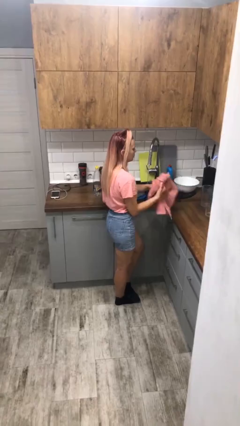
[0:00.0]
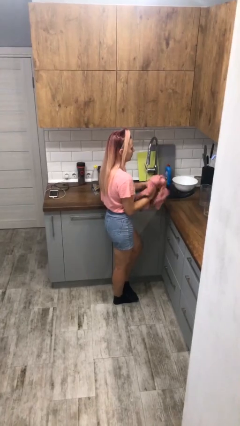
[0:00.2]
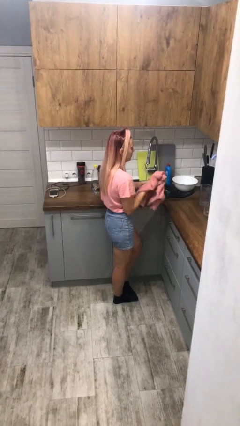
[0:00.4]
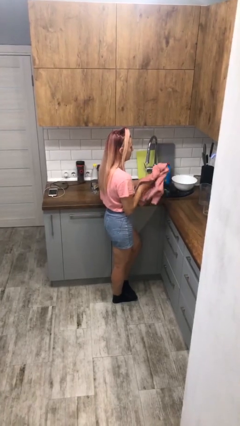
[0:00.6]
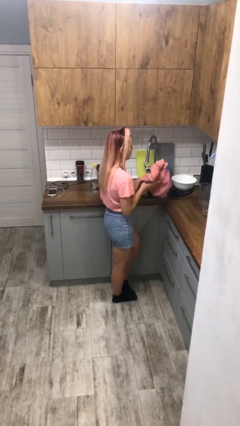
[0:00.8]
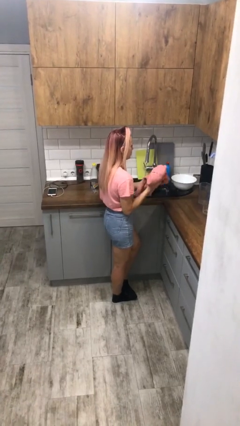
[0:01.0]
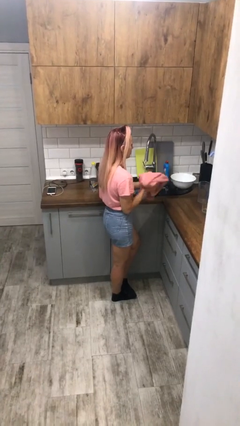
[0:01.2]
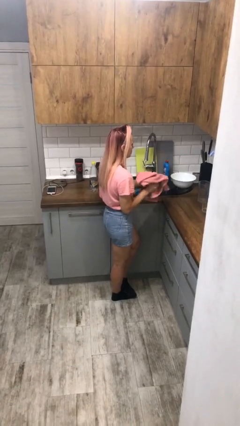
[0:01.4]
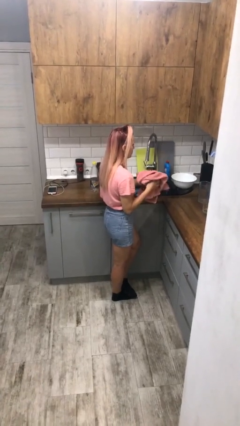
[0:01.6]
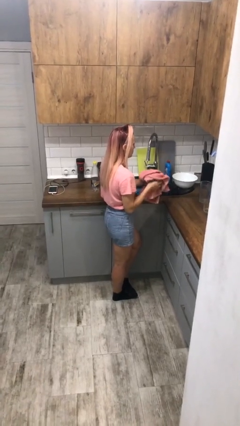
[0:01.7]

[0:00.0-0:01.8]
person dries hands with towel

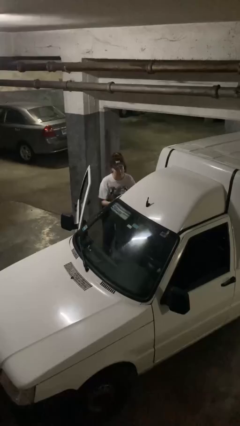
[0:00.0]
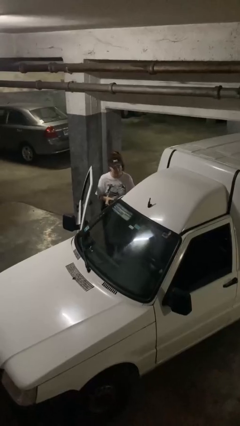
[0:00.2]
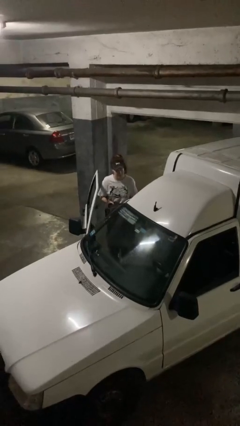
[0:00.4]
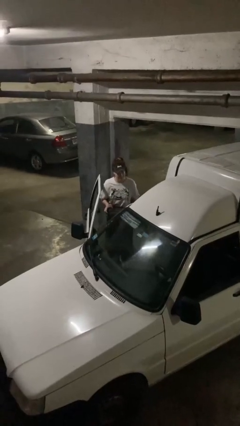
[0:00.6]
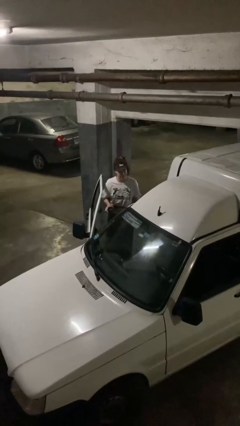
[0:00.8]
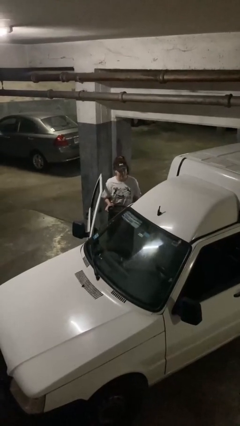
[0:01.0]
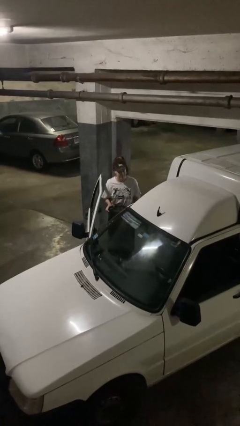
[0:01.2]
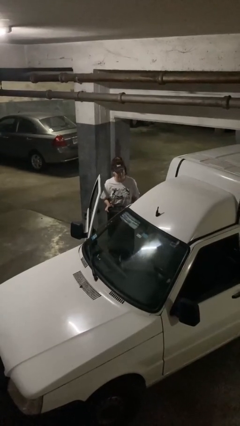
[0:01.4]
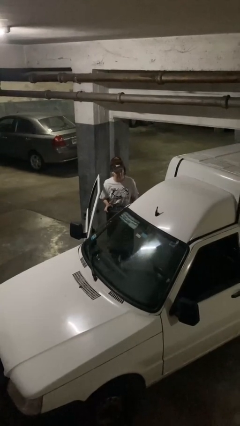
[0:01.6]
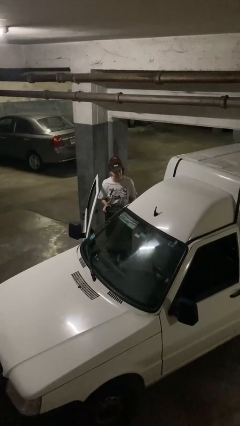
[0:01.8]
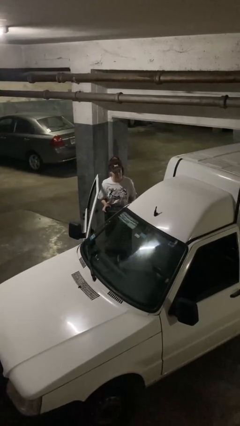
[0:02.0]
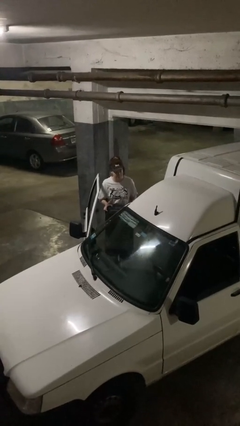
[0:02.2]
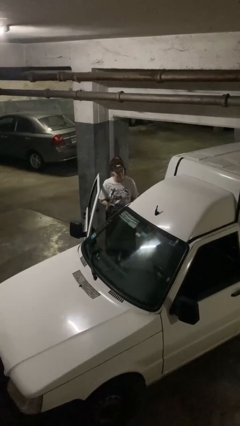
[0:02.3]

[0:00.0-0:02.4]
person unloads car

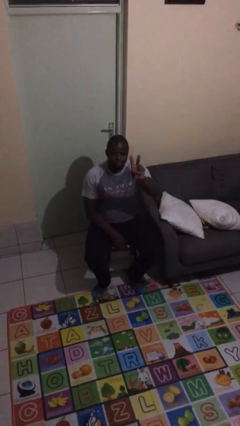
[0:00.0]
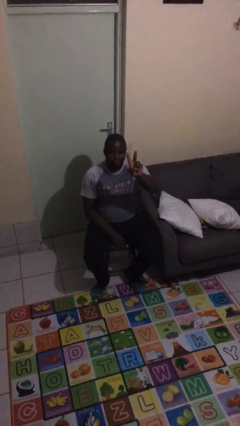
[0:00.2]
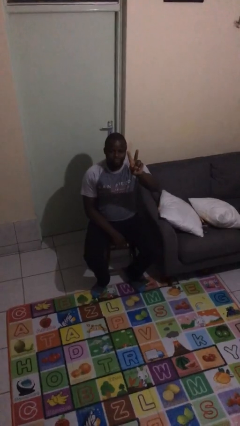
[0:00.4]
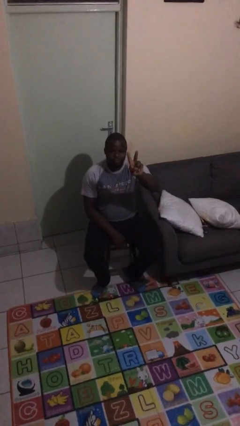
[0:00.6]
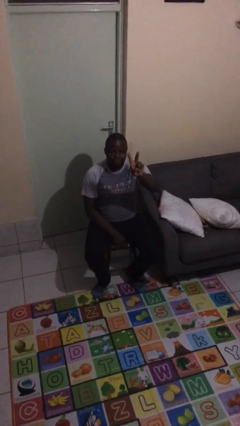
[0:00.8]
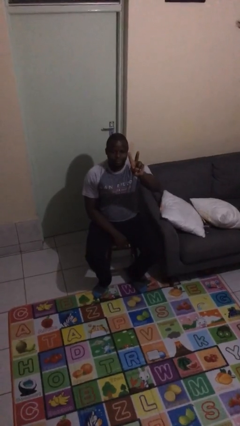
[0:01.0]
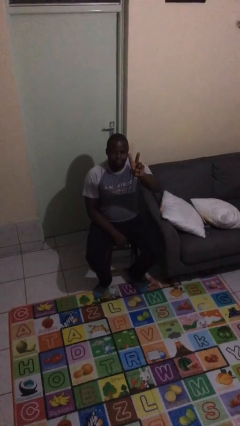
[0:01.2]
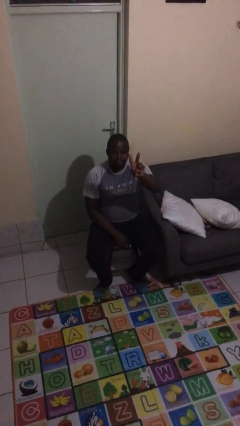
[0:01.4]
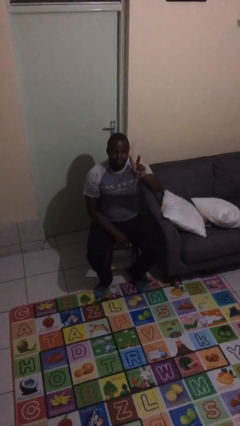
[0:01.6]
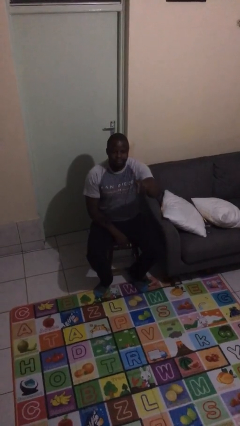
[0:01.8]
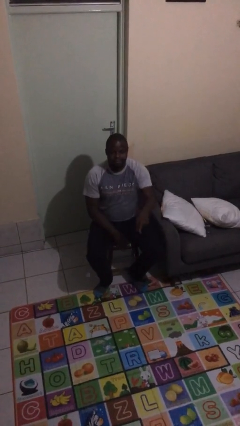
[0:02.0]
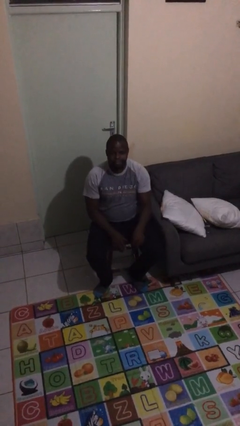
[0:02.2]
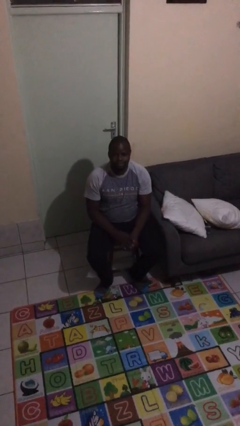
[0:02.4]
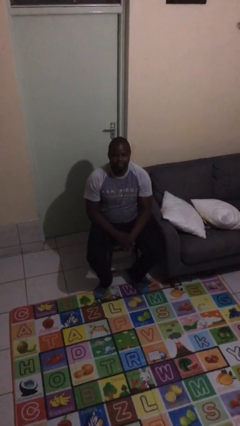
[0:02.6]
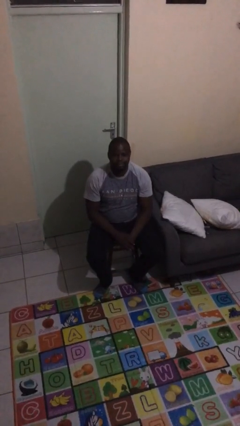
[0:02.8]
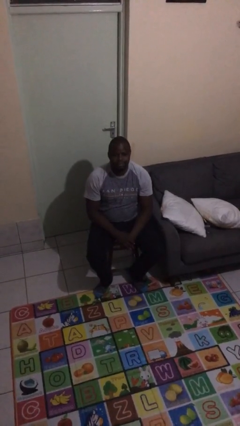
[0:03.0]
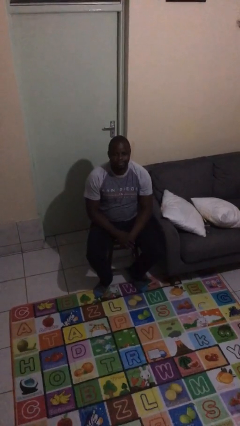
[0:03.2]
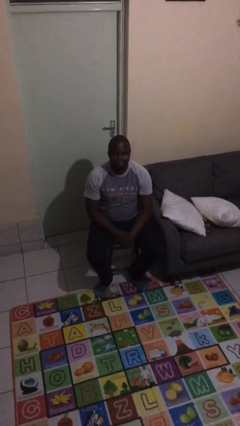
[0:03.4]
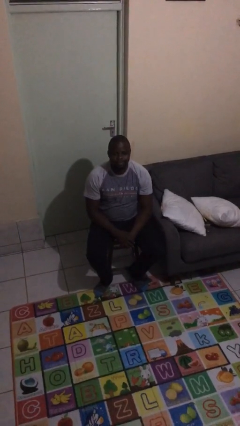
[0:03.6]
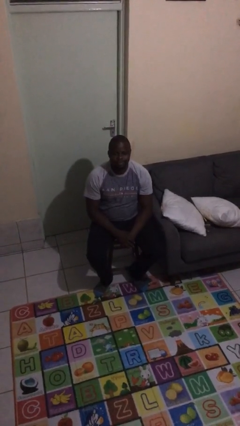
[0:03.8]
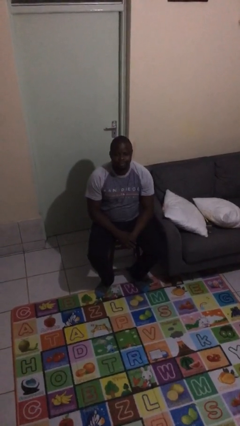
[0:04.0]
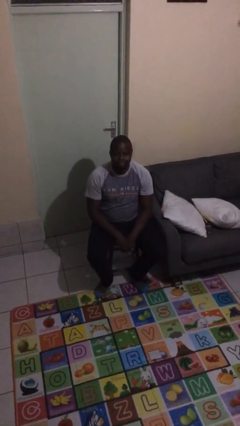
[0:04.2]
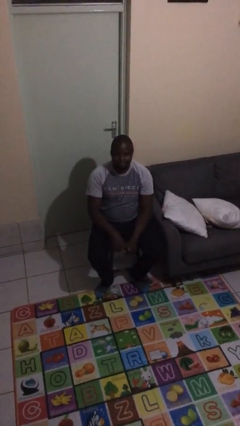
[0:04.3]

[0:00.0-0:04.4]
person gestures peace

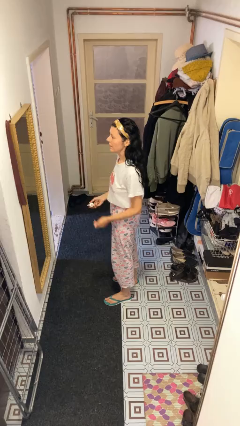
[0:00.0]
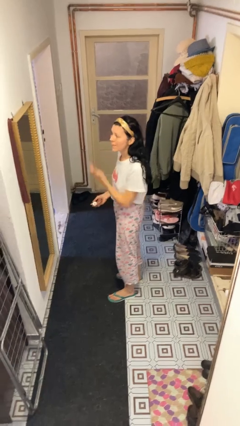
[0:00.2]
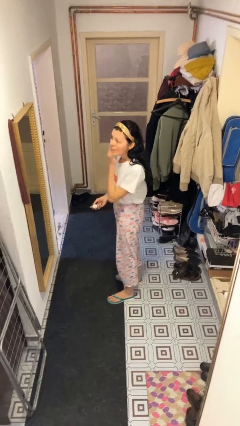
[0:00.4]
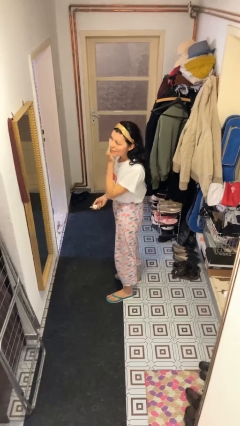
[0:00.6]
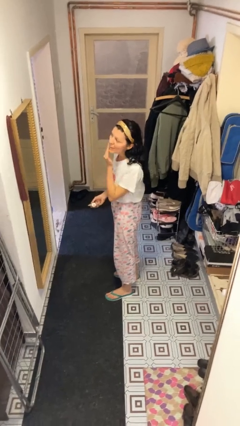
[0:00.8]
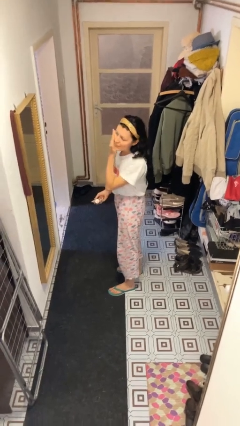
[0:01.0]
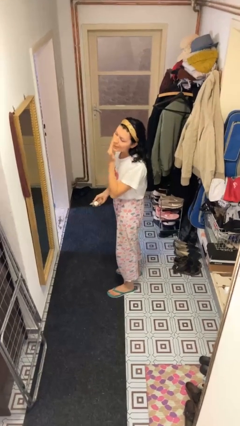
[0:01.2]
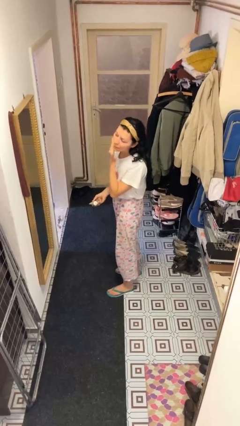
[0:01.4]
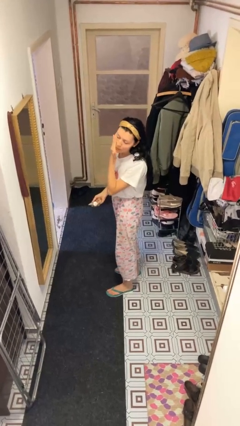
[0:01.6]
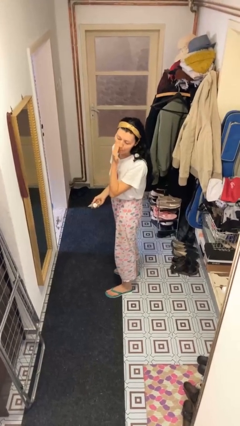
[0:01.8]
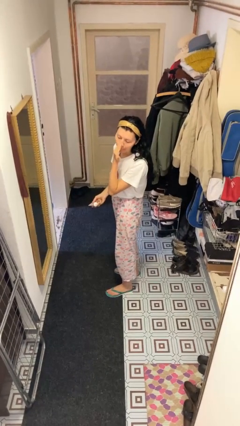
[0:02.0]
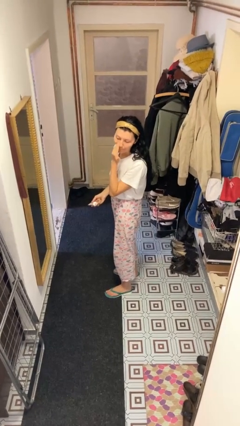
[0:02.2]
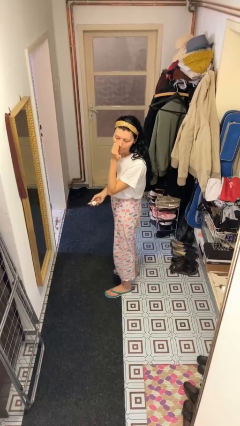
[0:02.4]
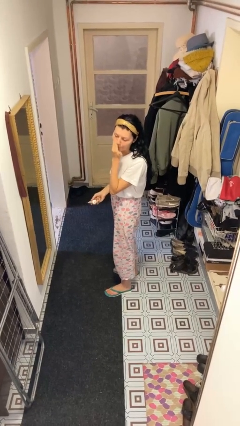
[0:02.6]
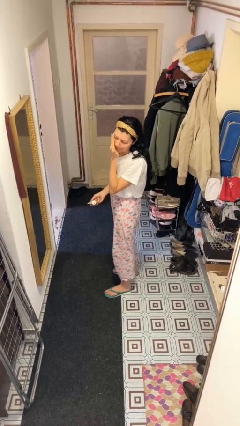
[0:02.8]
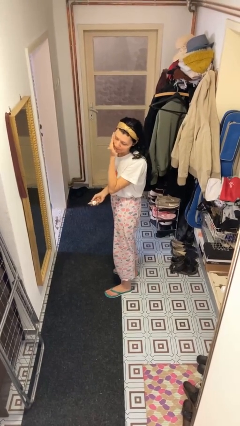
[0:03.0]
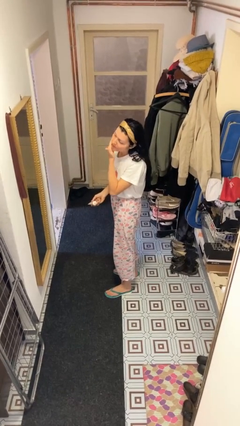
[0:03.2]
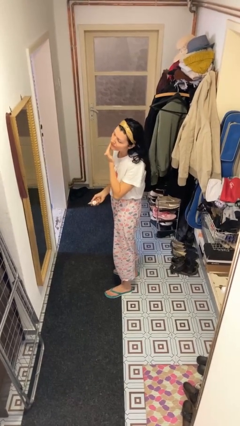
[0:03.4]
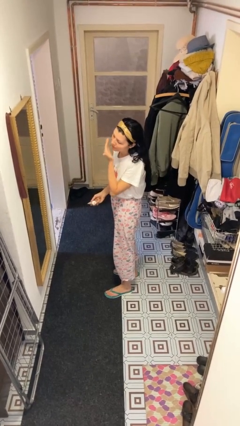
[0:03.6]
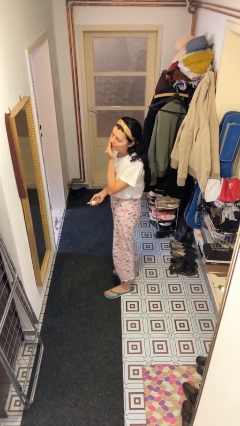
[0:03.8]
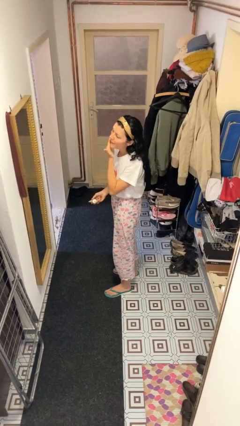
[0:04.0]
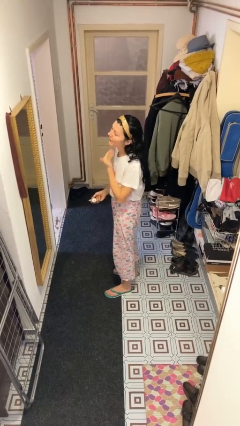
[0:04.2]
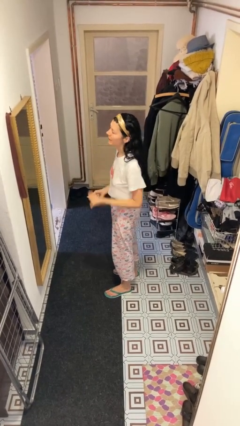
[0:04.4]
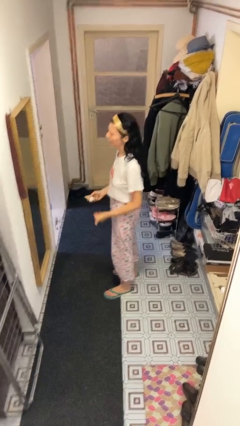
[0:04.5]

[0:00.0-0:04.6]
person applies foundation makeup

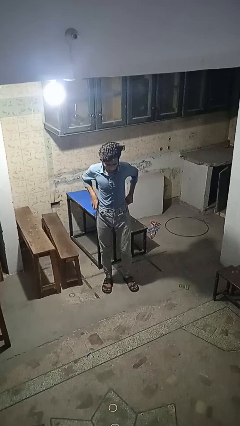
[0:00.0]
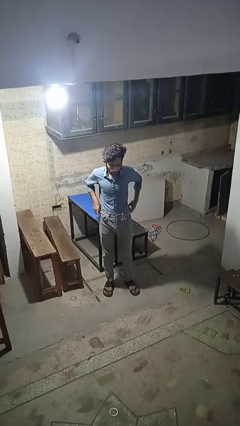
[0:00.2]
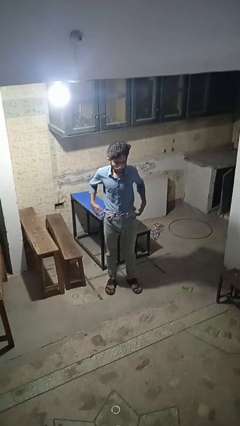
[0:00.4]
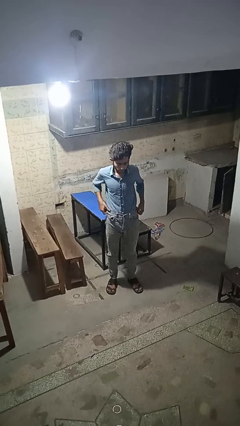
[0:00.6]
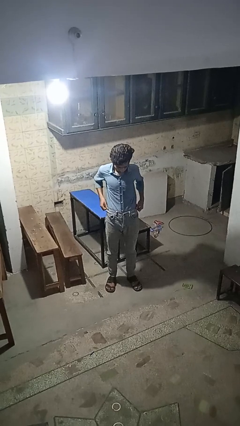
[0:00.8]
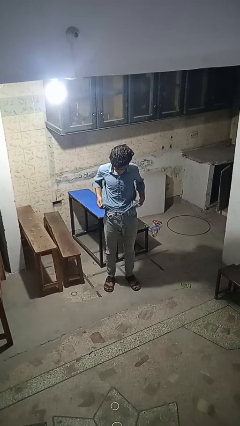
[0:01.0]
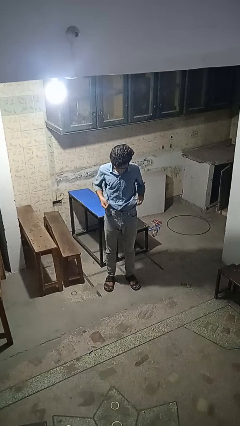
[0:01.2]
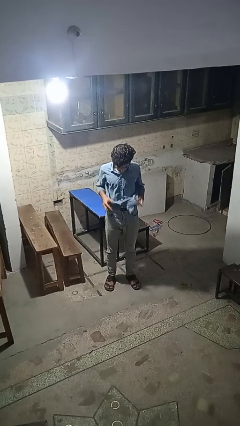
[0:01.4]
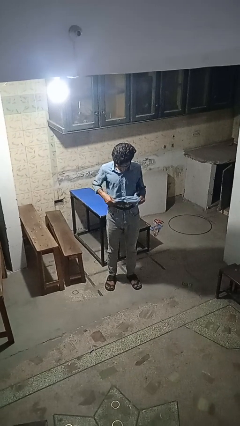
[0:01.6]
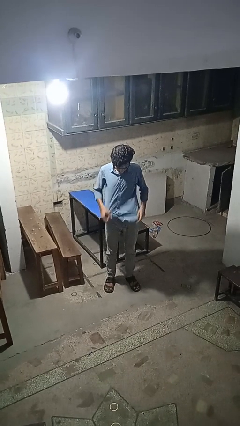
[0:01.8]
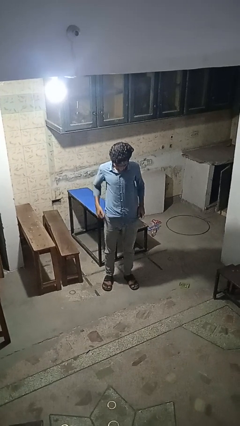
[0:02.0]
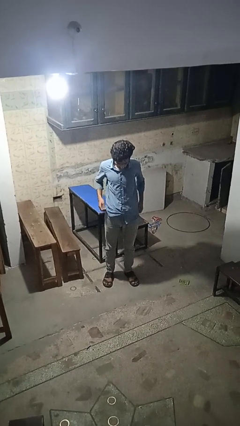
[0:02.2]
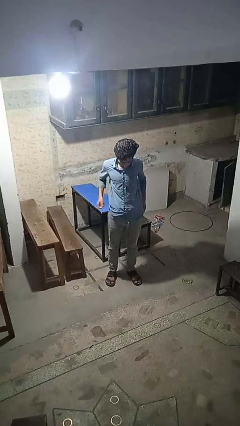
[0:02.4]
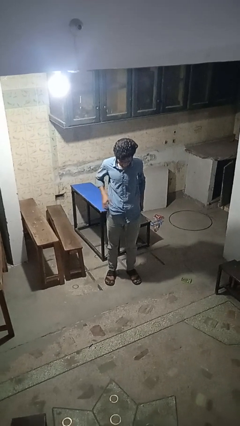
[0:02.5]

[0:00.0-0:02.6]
person untucks shirt

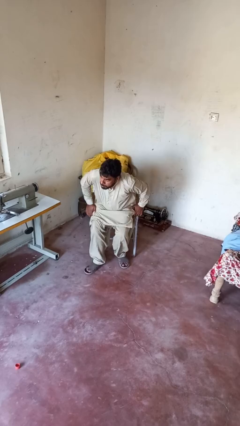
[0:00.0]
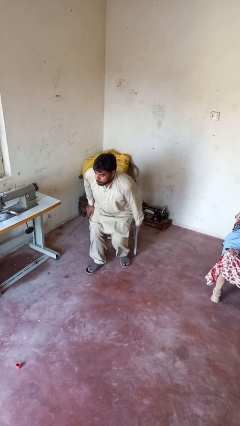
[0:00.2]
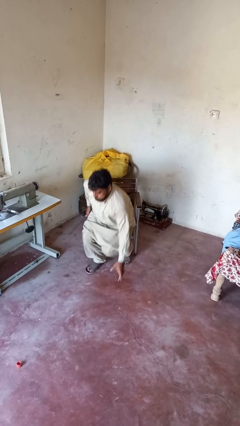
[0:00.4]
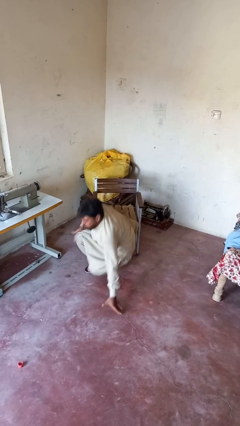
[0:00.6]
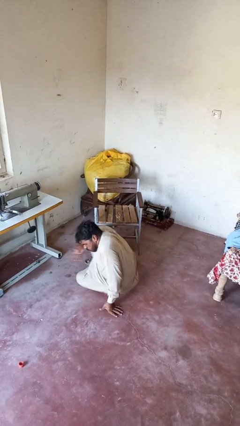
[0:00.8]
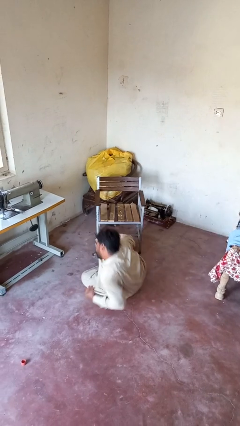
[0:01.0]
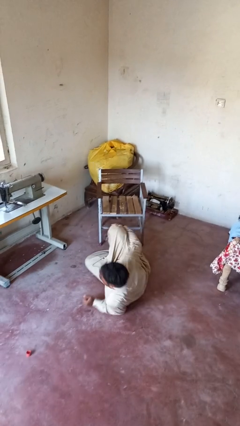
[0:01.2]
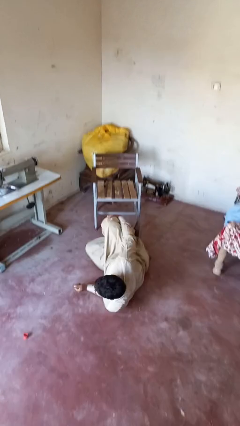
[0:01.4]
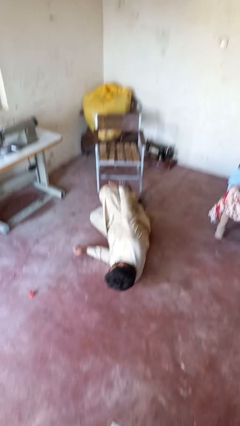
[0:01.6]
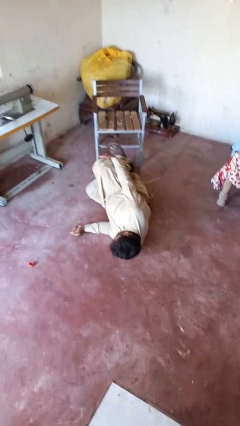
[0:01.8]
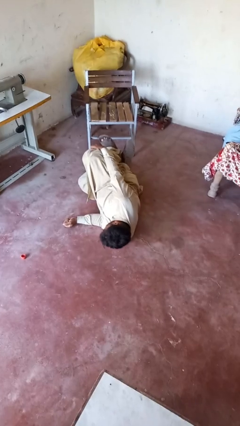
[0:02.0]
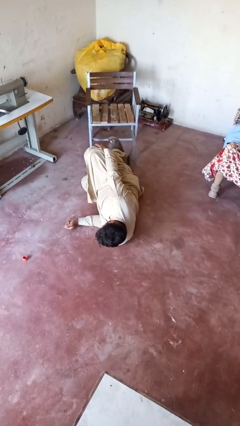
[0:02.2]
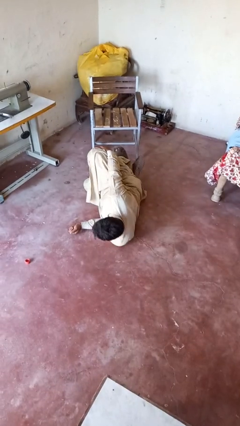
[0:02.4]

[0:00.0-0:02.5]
person falls from chair
